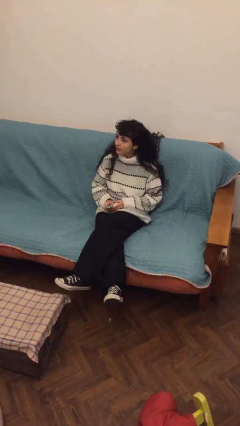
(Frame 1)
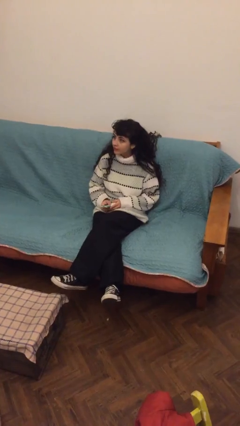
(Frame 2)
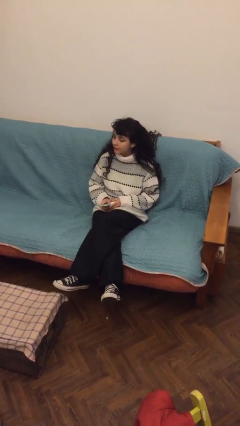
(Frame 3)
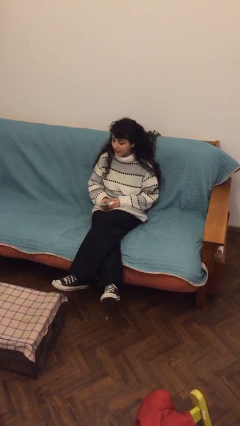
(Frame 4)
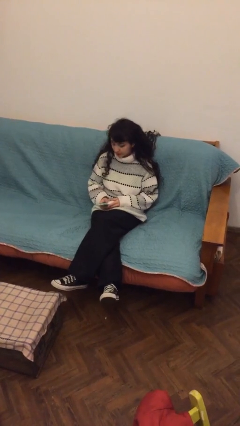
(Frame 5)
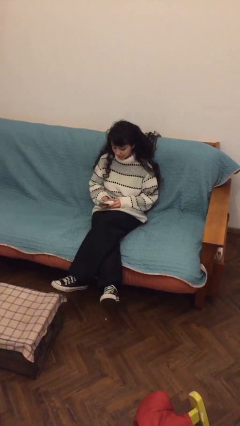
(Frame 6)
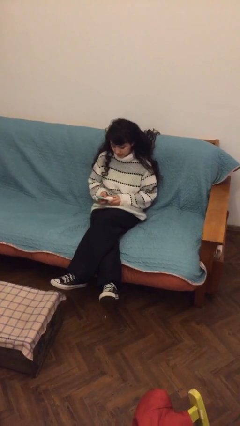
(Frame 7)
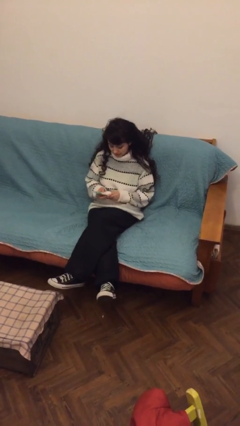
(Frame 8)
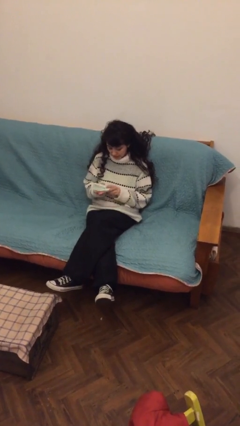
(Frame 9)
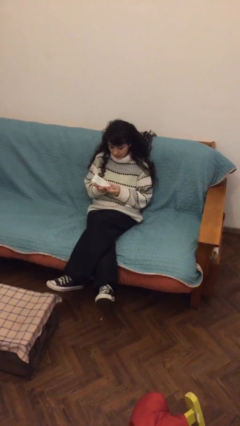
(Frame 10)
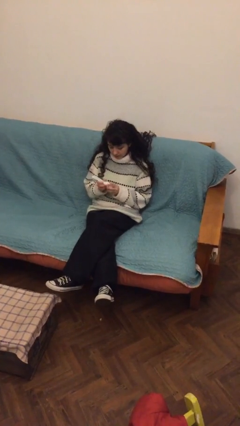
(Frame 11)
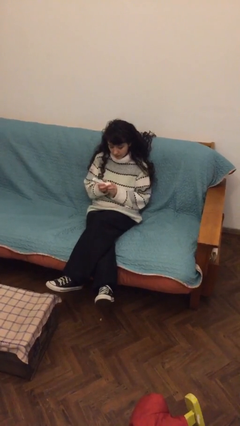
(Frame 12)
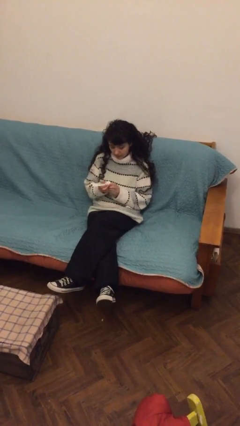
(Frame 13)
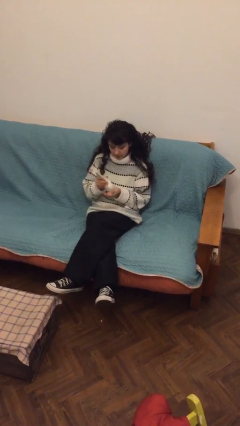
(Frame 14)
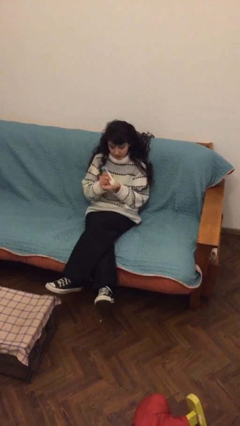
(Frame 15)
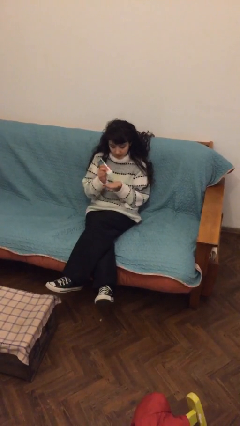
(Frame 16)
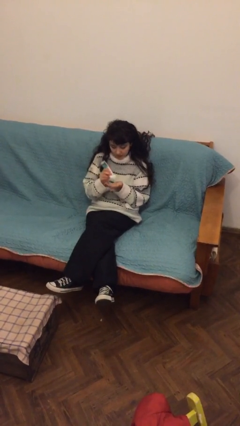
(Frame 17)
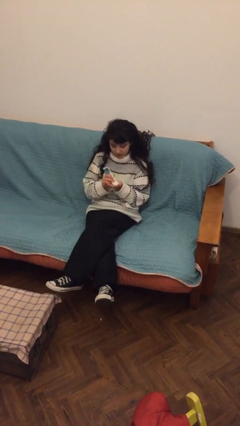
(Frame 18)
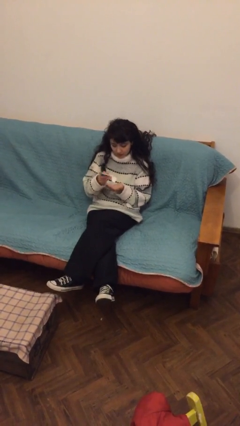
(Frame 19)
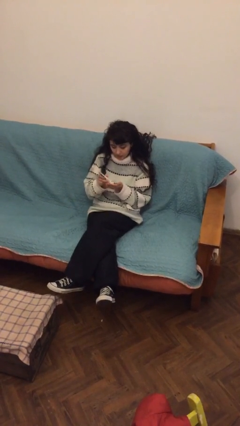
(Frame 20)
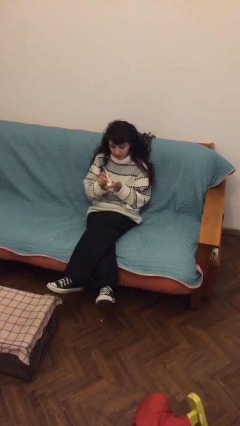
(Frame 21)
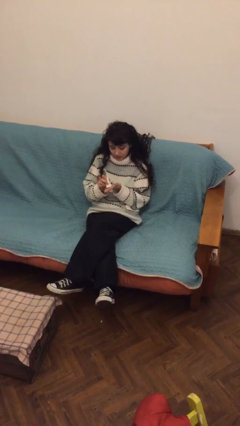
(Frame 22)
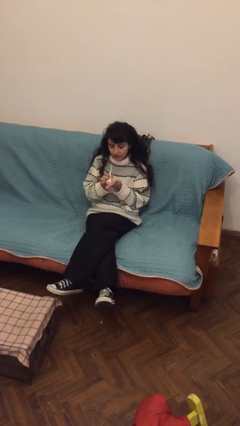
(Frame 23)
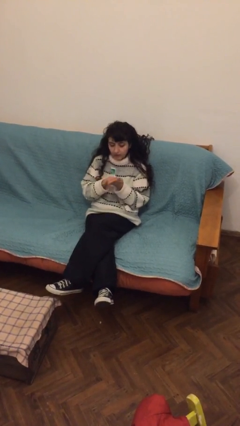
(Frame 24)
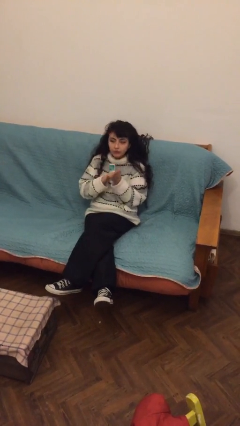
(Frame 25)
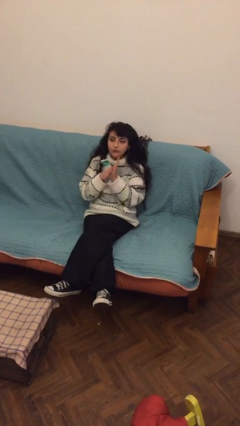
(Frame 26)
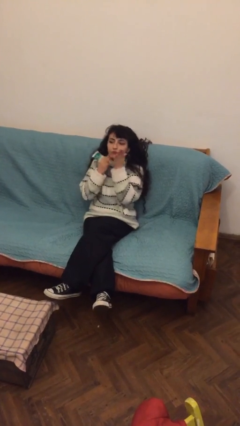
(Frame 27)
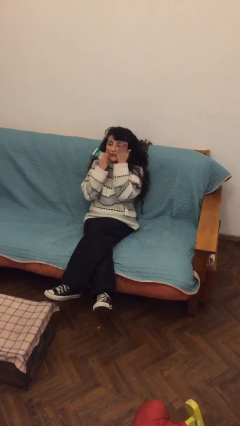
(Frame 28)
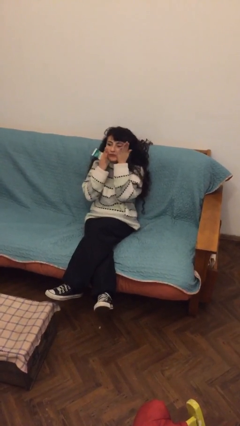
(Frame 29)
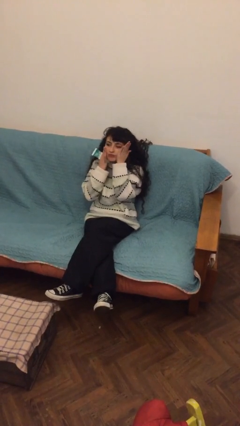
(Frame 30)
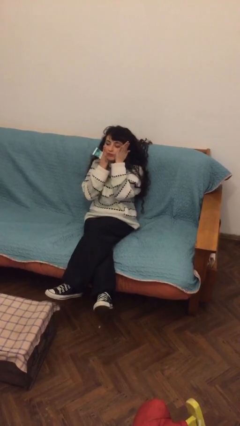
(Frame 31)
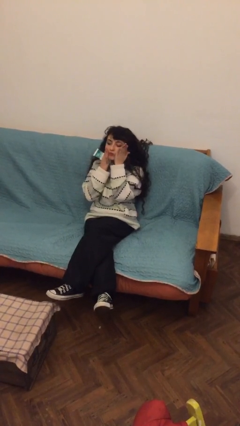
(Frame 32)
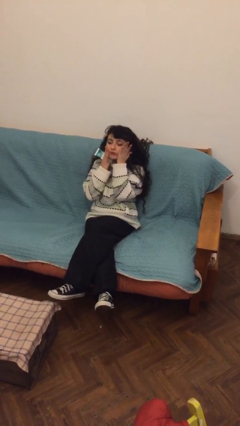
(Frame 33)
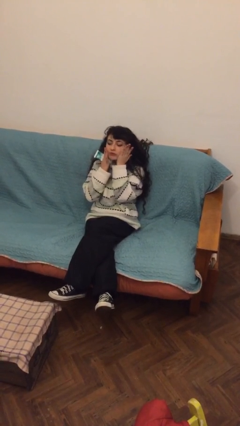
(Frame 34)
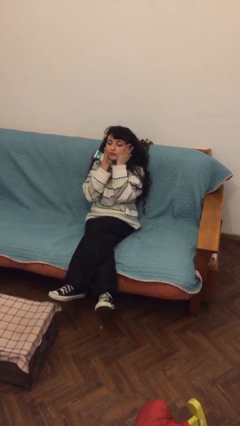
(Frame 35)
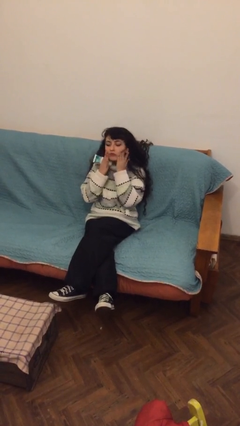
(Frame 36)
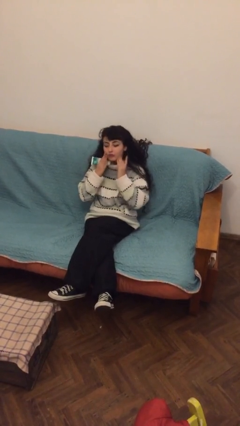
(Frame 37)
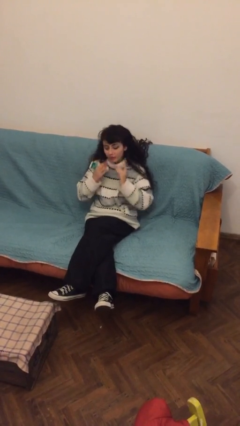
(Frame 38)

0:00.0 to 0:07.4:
person applies facial moisturizer

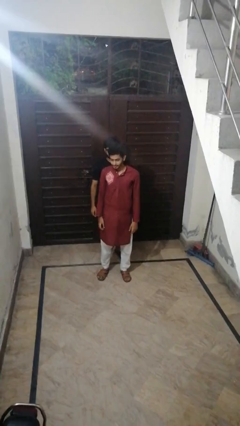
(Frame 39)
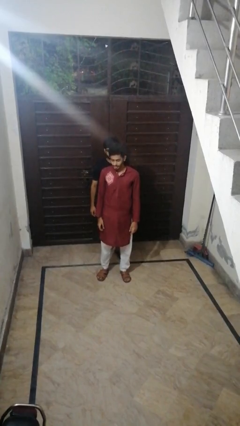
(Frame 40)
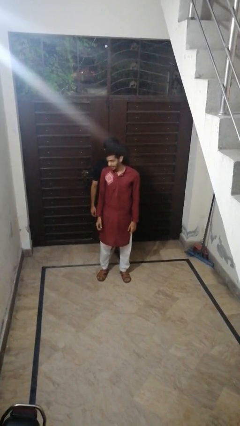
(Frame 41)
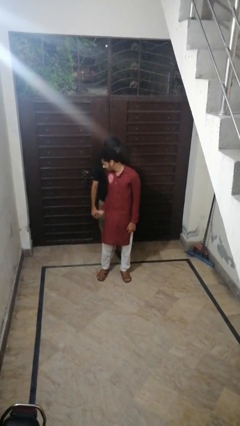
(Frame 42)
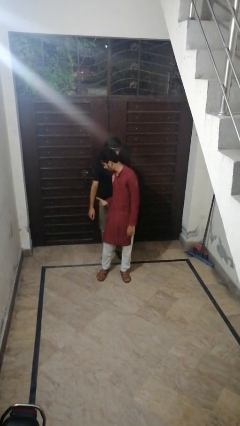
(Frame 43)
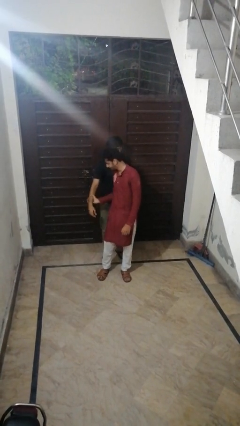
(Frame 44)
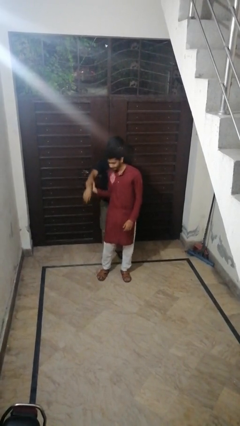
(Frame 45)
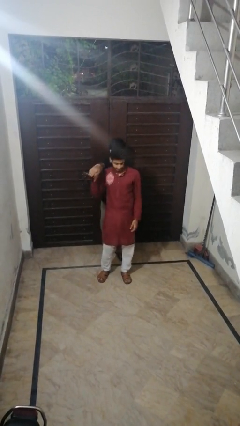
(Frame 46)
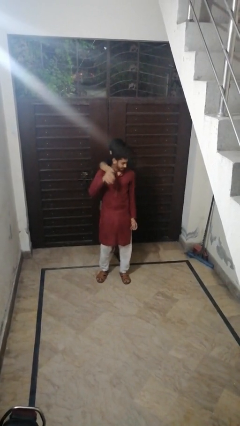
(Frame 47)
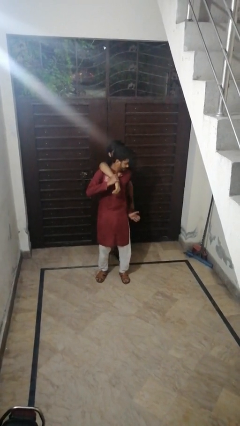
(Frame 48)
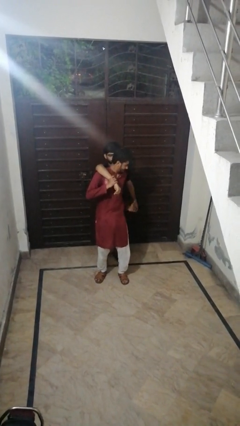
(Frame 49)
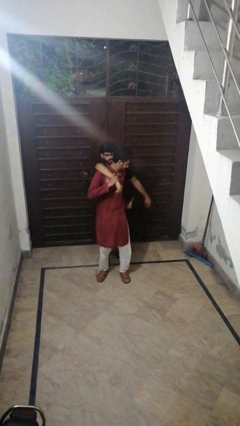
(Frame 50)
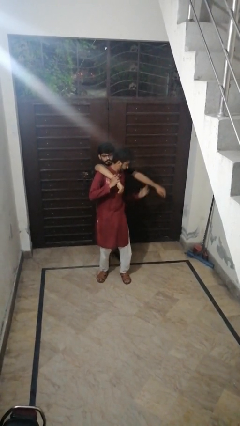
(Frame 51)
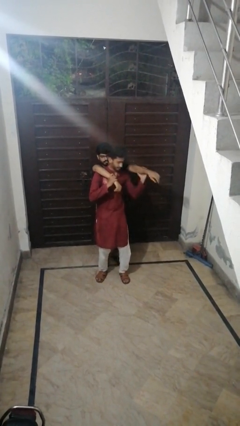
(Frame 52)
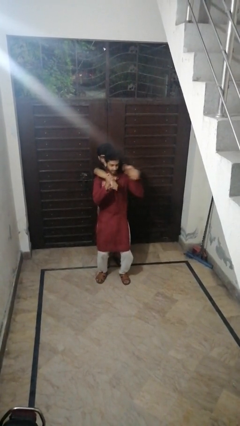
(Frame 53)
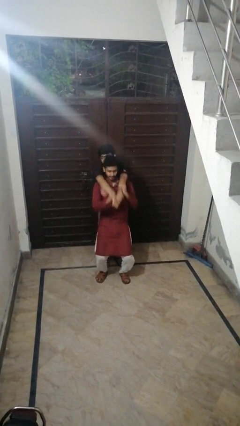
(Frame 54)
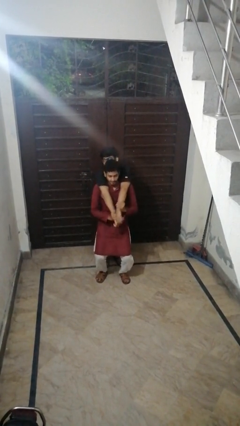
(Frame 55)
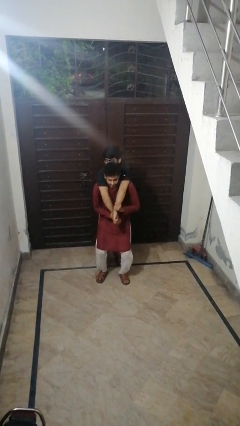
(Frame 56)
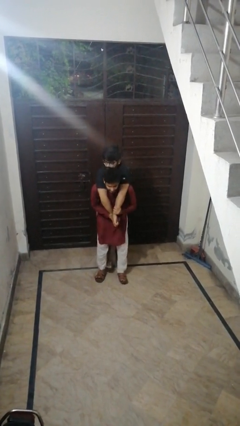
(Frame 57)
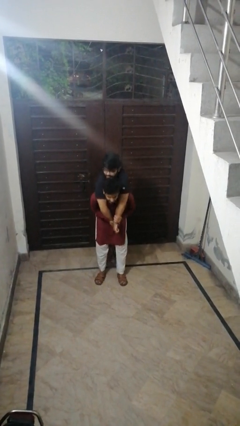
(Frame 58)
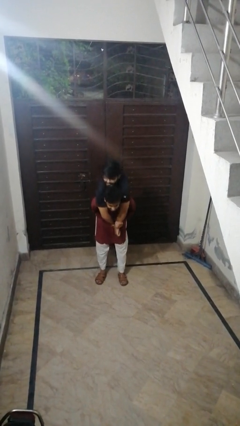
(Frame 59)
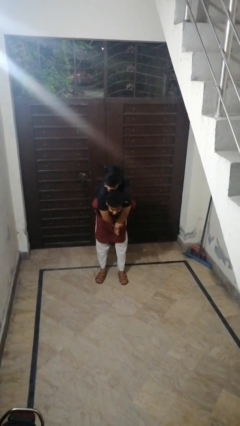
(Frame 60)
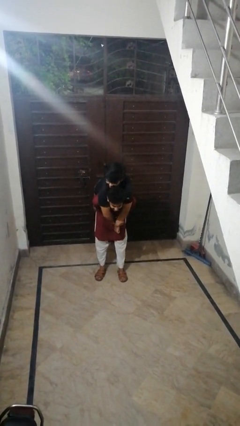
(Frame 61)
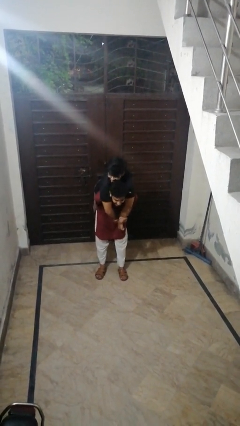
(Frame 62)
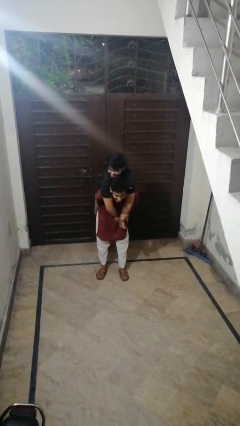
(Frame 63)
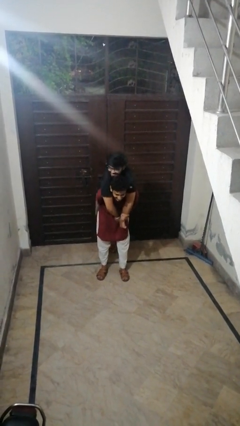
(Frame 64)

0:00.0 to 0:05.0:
person carries person over shoulder

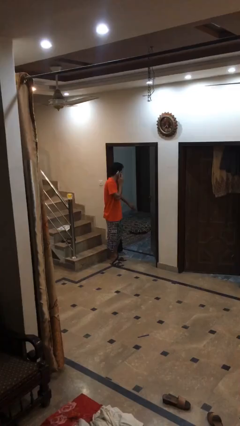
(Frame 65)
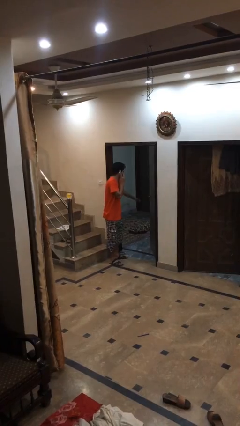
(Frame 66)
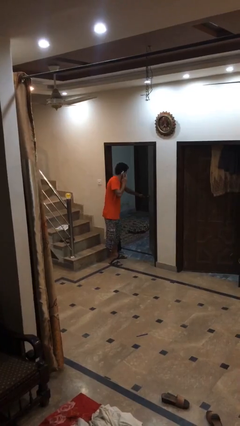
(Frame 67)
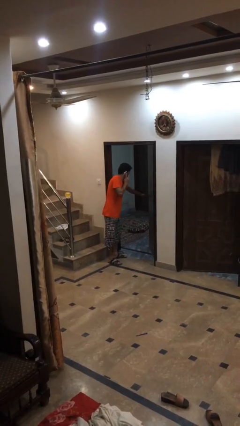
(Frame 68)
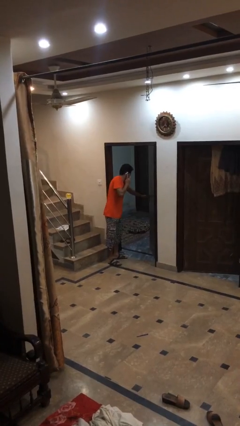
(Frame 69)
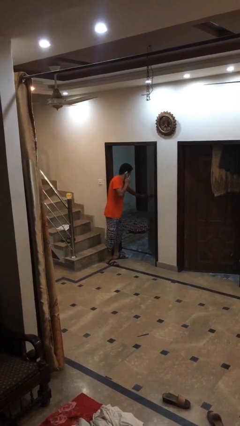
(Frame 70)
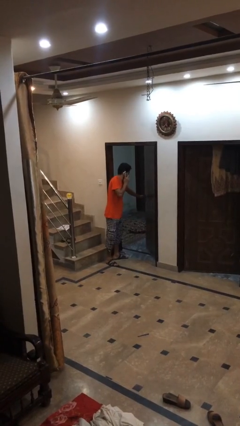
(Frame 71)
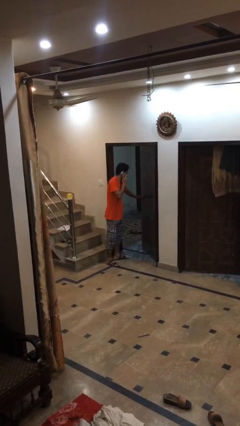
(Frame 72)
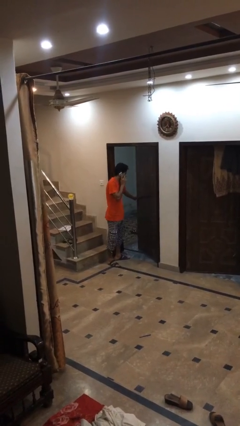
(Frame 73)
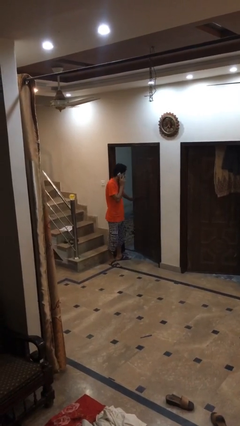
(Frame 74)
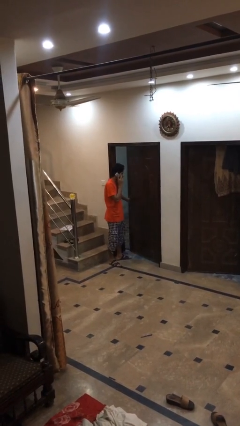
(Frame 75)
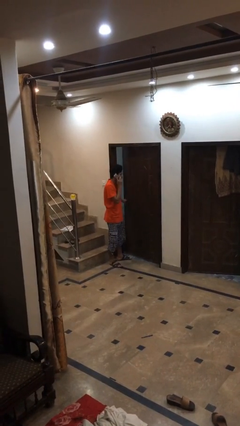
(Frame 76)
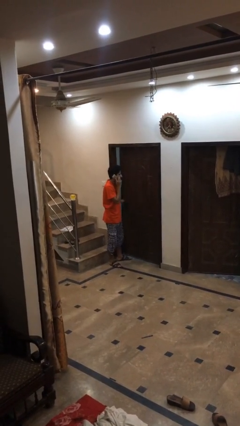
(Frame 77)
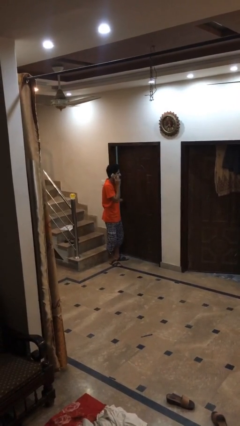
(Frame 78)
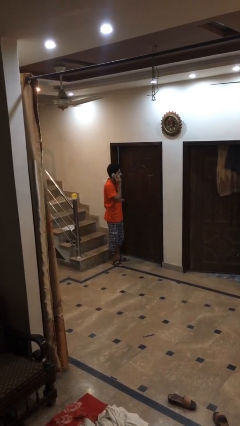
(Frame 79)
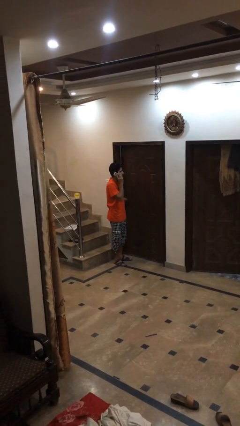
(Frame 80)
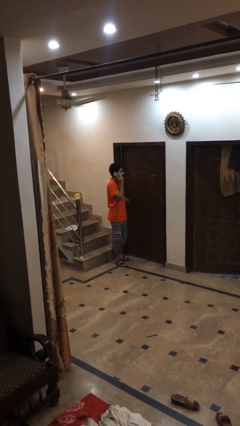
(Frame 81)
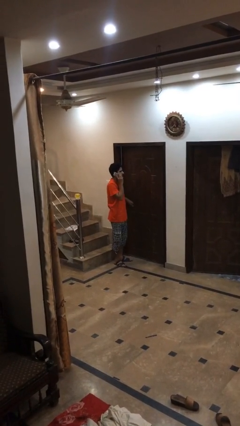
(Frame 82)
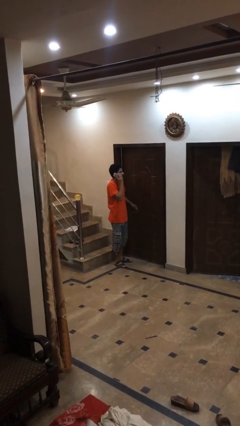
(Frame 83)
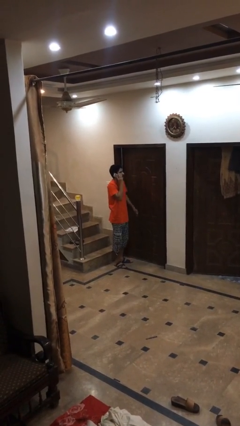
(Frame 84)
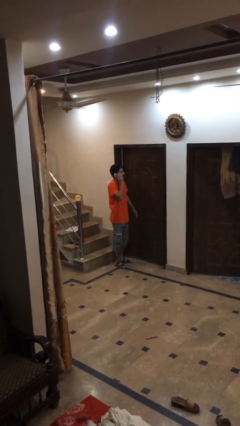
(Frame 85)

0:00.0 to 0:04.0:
person closes facility door

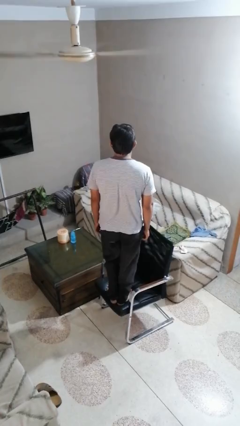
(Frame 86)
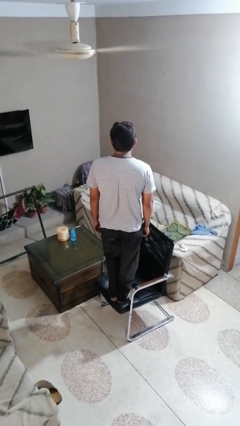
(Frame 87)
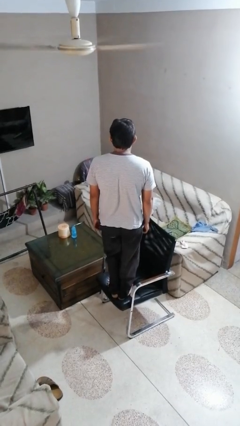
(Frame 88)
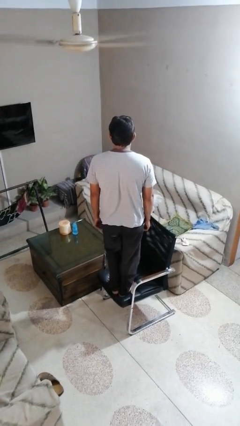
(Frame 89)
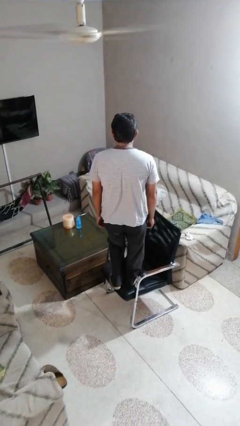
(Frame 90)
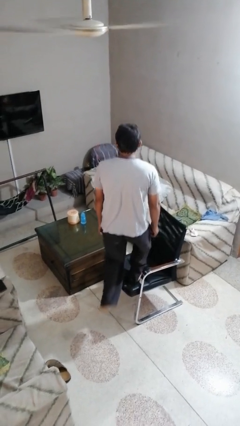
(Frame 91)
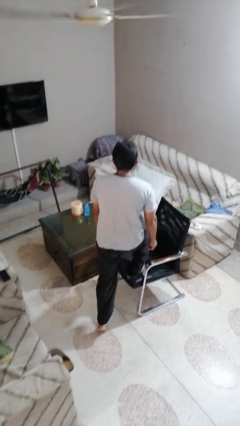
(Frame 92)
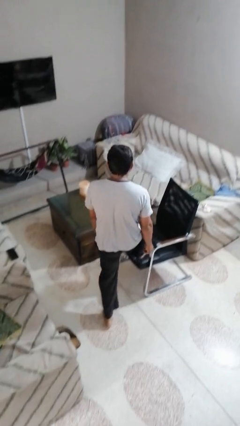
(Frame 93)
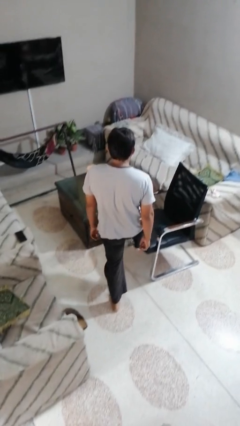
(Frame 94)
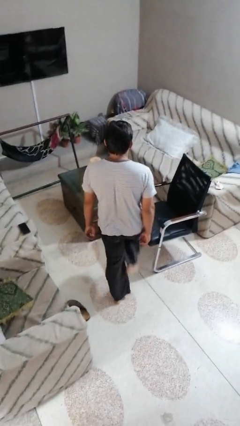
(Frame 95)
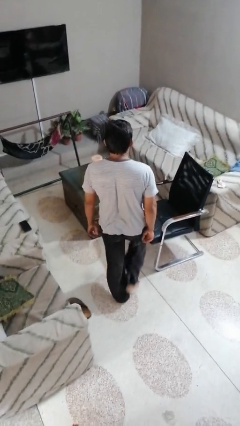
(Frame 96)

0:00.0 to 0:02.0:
person climbs off chair
